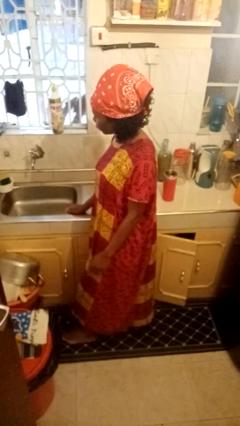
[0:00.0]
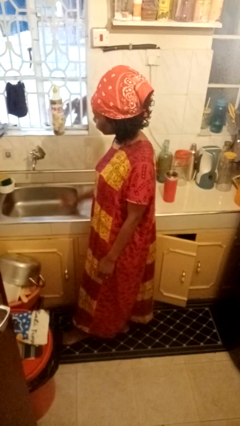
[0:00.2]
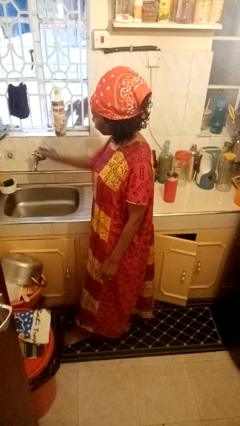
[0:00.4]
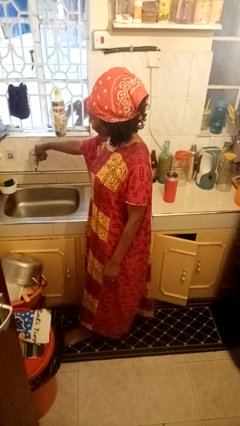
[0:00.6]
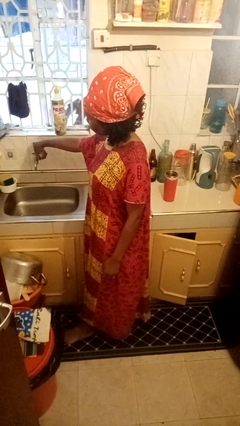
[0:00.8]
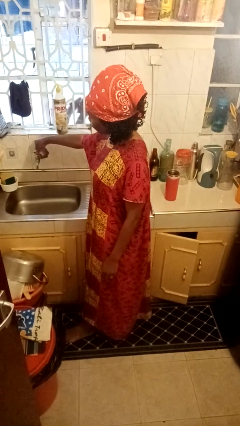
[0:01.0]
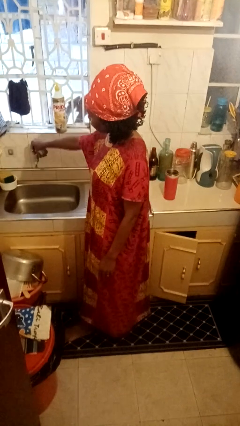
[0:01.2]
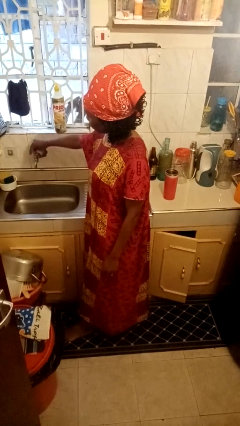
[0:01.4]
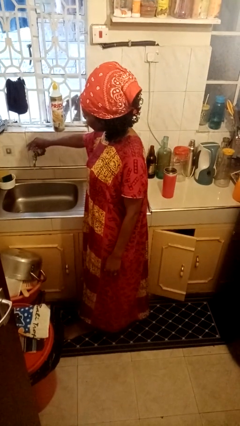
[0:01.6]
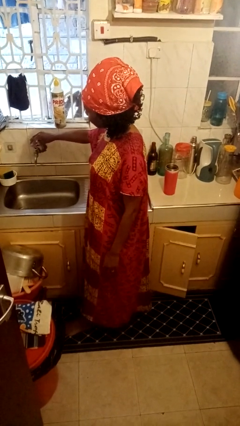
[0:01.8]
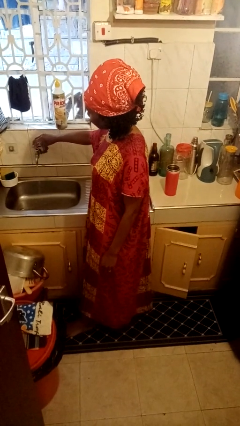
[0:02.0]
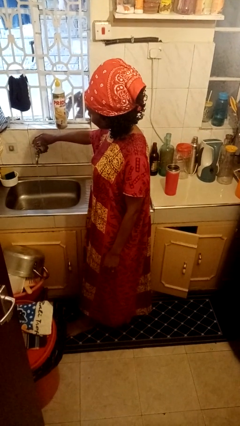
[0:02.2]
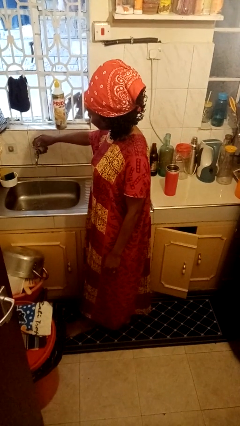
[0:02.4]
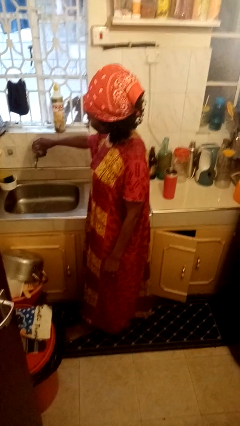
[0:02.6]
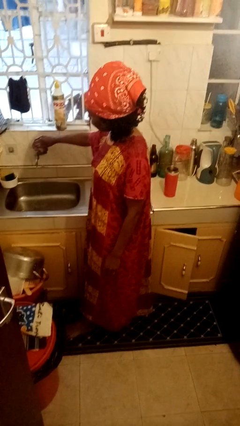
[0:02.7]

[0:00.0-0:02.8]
person turns on faucet

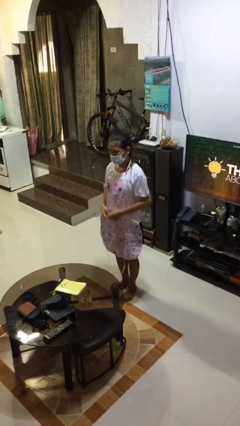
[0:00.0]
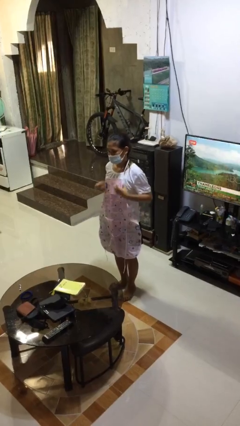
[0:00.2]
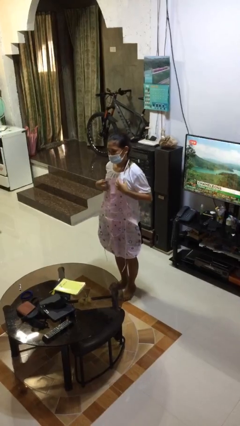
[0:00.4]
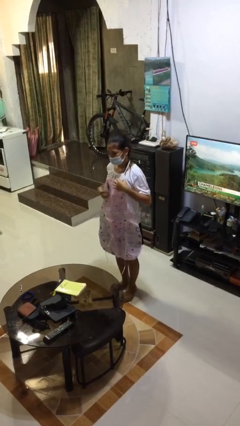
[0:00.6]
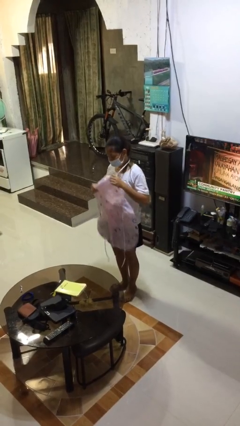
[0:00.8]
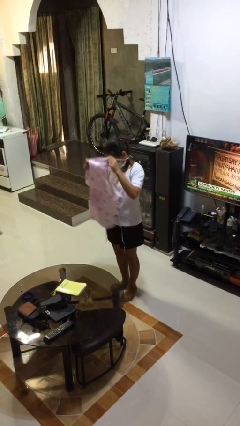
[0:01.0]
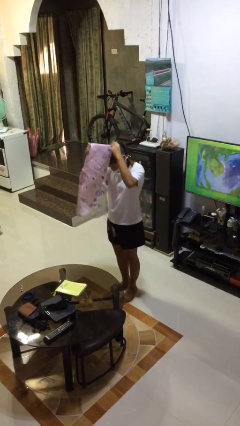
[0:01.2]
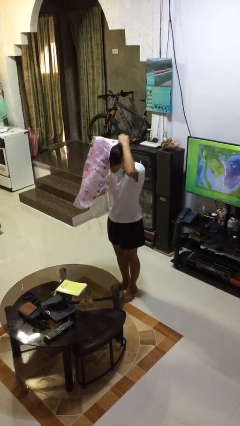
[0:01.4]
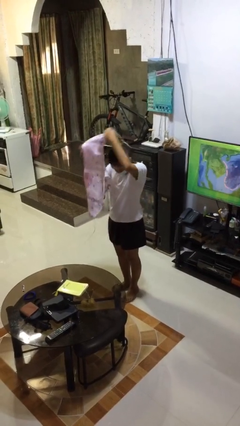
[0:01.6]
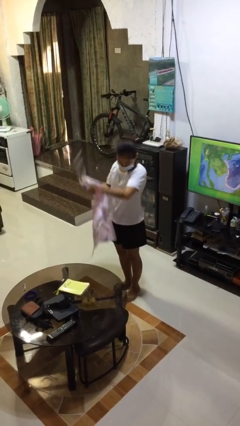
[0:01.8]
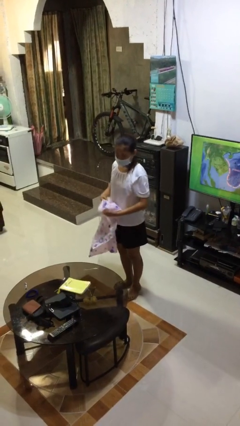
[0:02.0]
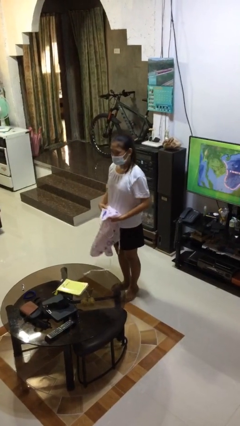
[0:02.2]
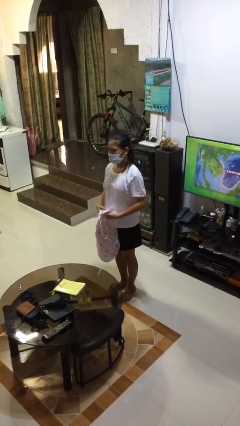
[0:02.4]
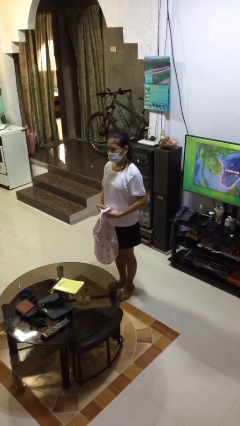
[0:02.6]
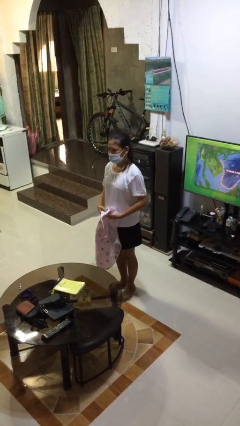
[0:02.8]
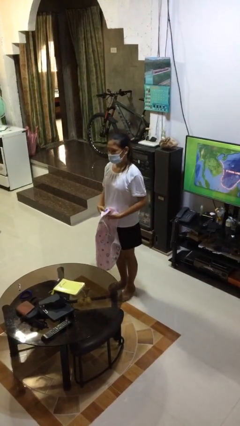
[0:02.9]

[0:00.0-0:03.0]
person takes off apron

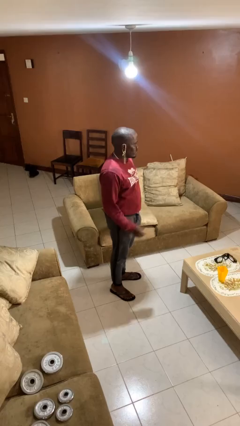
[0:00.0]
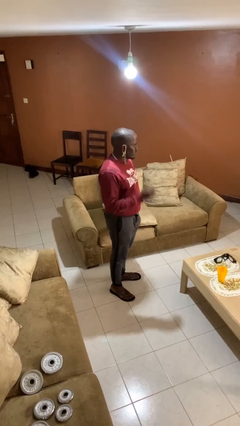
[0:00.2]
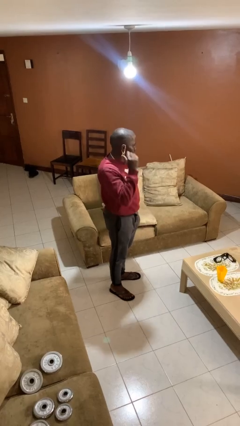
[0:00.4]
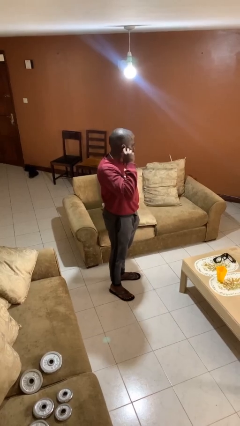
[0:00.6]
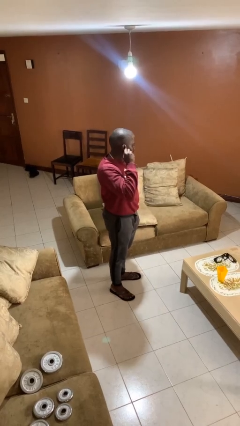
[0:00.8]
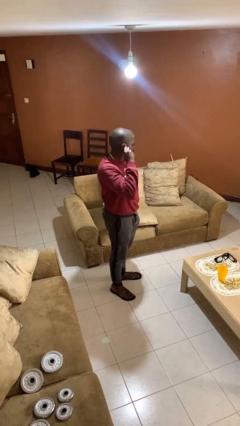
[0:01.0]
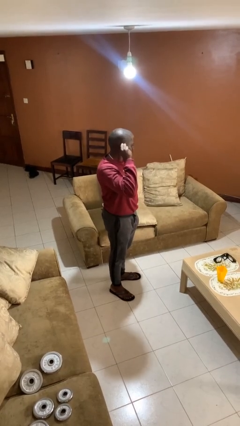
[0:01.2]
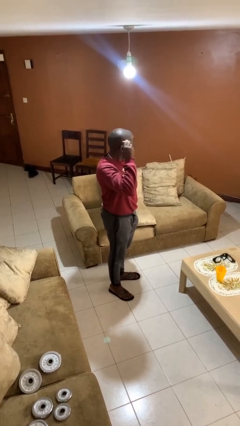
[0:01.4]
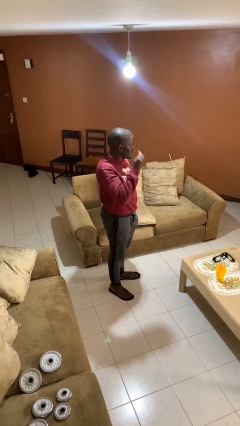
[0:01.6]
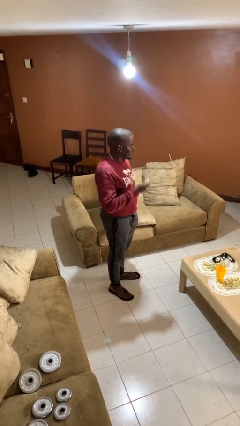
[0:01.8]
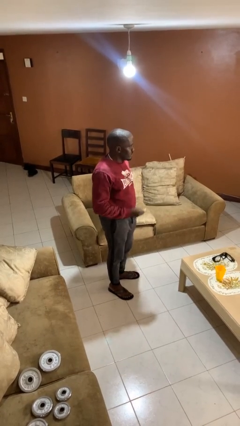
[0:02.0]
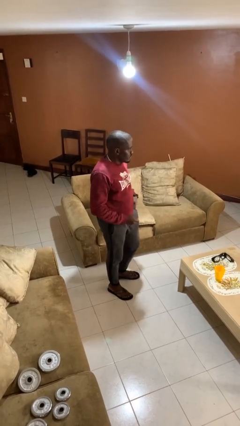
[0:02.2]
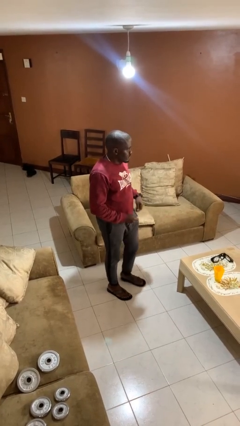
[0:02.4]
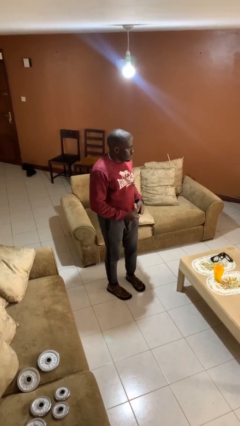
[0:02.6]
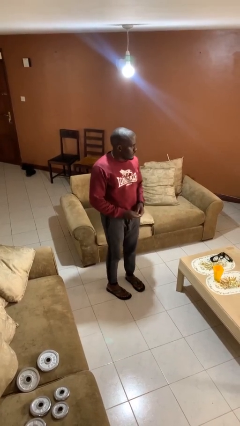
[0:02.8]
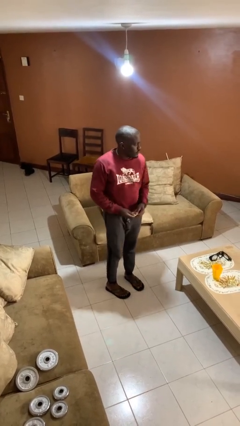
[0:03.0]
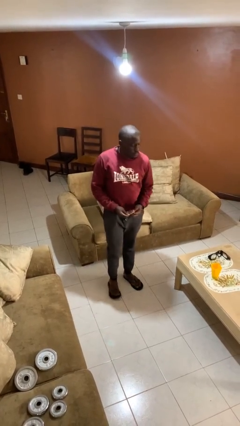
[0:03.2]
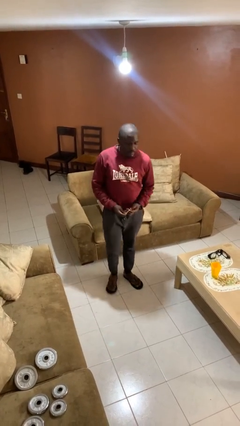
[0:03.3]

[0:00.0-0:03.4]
person takes off earrings

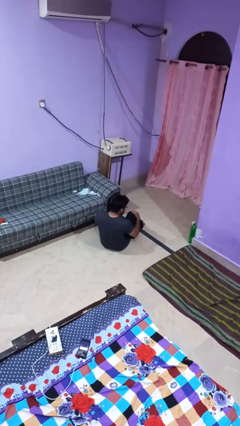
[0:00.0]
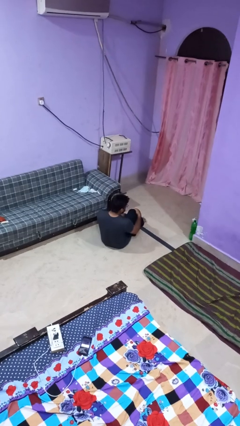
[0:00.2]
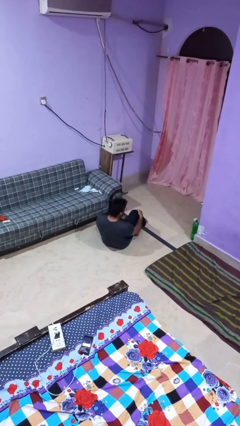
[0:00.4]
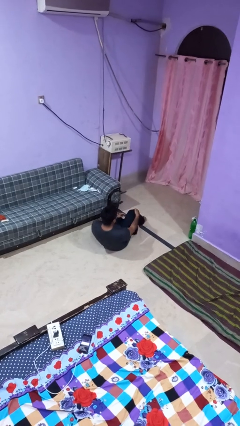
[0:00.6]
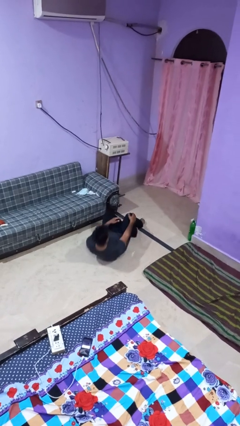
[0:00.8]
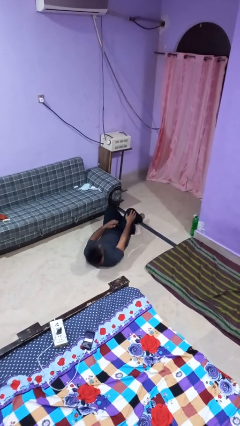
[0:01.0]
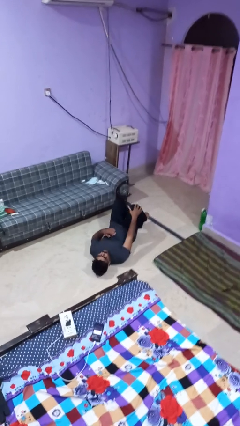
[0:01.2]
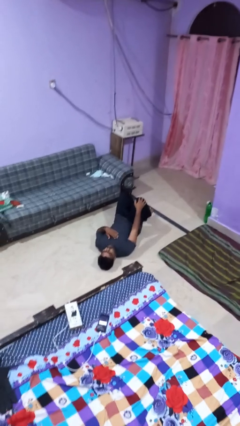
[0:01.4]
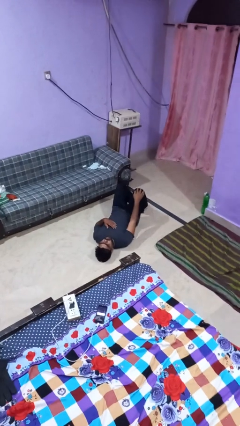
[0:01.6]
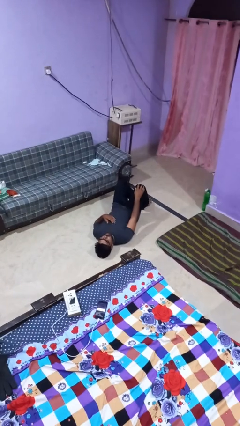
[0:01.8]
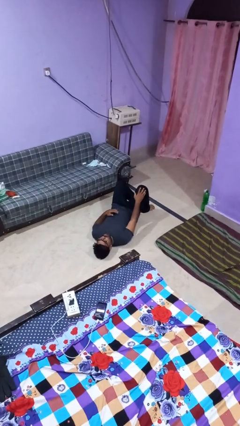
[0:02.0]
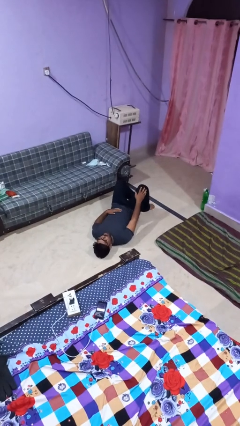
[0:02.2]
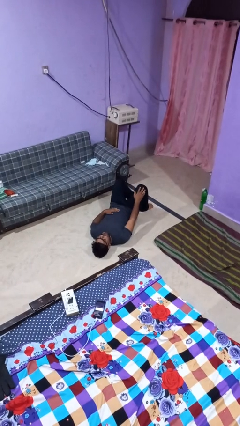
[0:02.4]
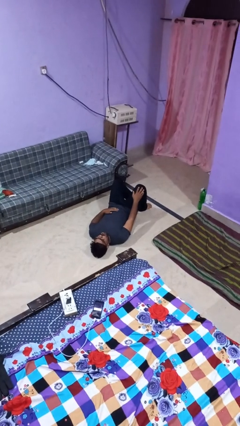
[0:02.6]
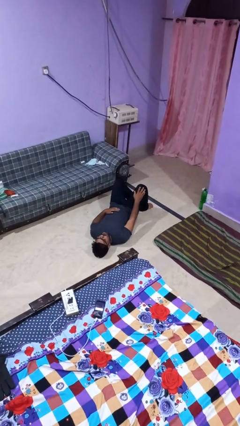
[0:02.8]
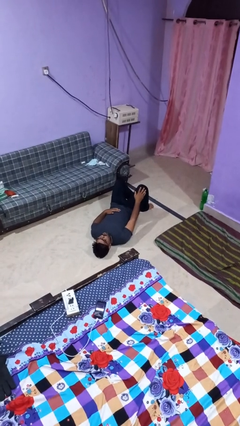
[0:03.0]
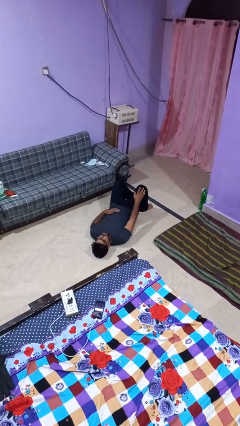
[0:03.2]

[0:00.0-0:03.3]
person lies down on floor

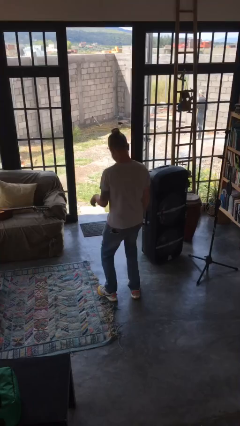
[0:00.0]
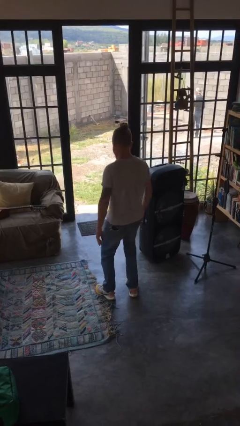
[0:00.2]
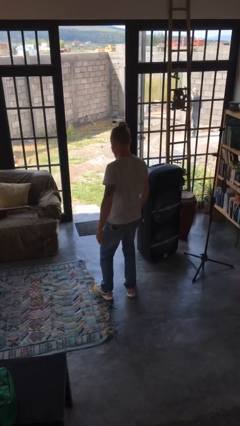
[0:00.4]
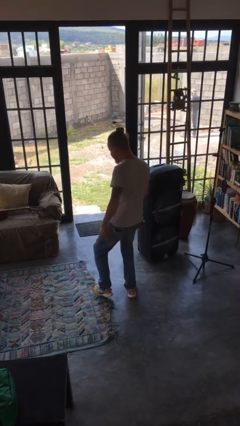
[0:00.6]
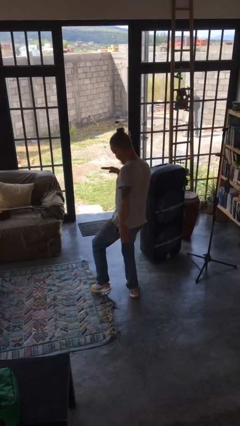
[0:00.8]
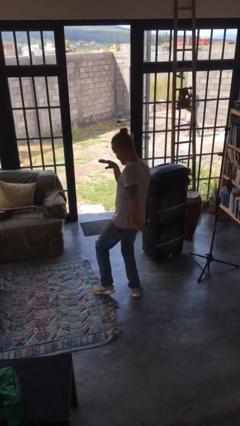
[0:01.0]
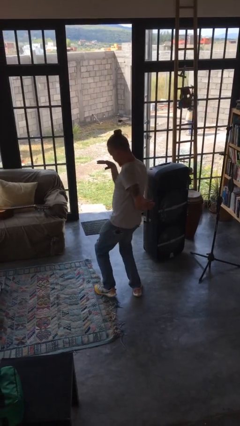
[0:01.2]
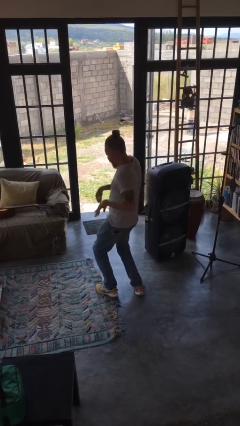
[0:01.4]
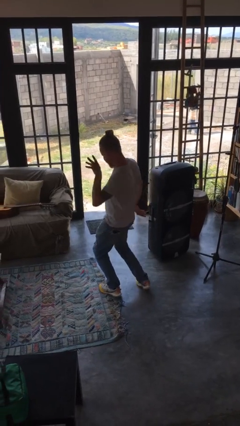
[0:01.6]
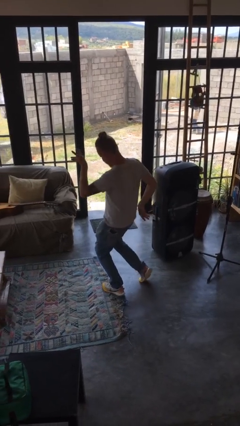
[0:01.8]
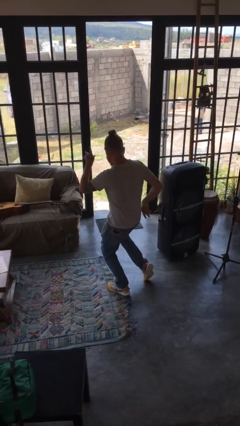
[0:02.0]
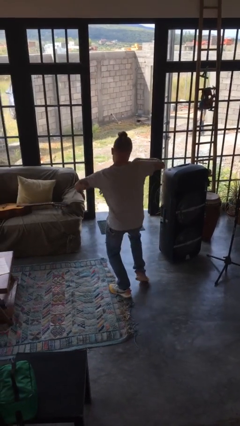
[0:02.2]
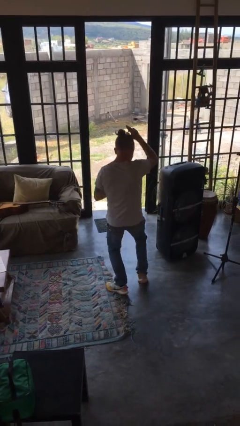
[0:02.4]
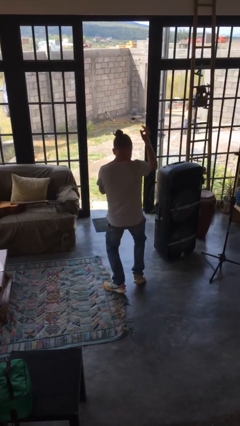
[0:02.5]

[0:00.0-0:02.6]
person dances in place

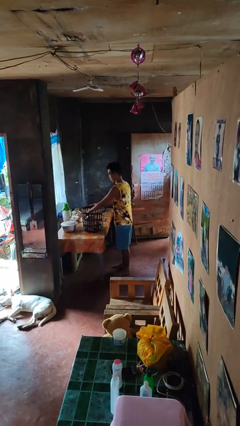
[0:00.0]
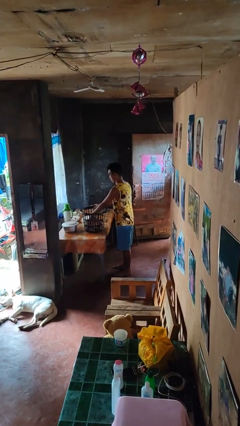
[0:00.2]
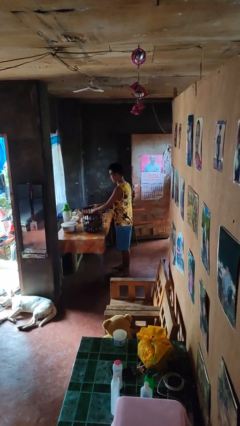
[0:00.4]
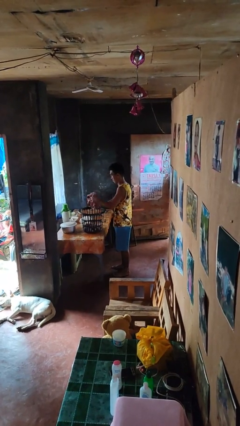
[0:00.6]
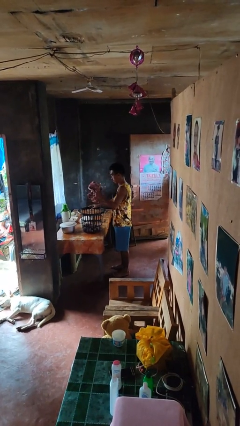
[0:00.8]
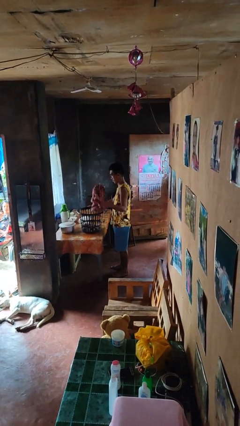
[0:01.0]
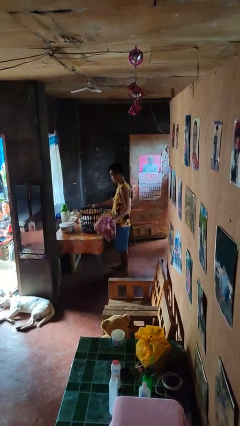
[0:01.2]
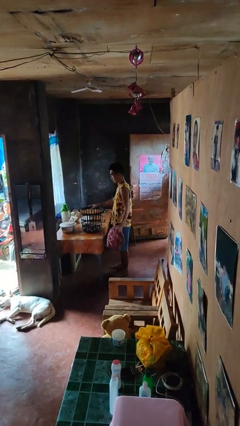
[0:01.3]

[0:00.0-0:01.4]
person takes object from basket

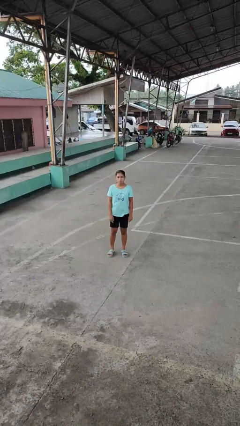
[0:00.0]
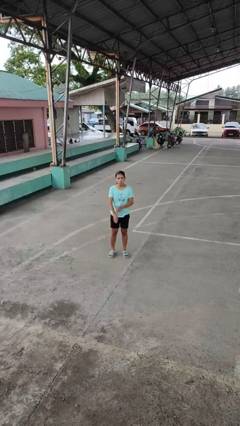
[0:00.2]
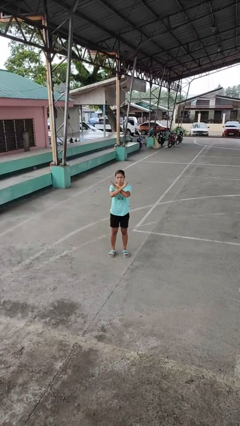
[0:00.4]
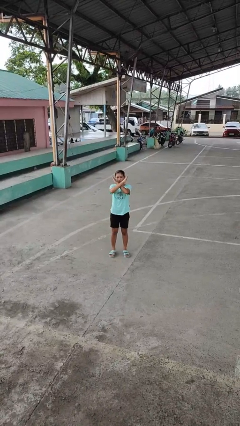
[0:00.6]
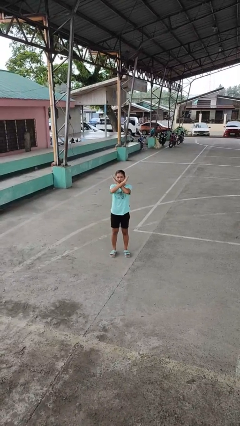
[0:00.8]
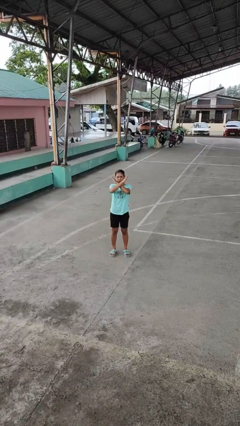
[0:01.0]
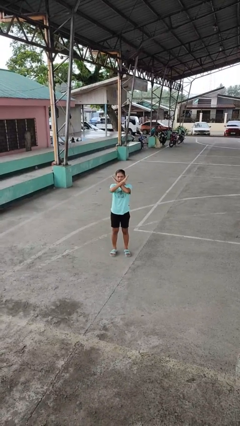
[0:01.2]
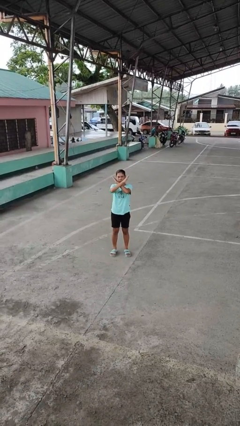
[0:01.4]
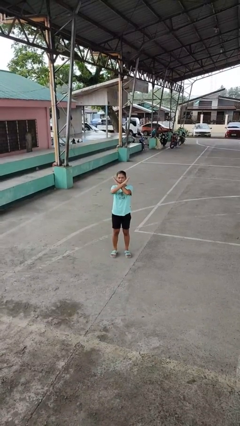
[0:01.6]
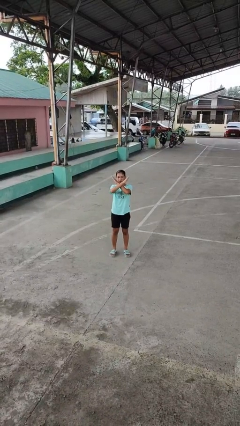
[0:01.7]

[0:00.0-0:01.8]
person gestures arms x
